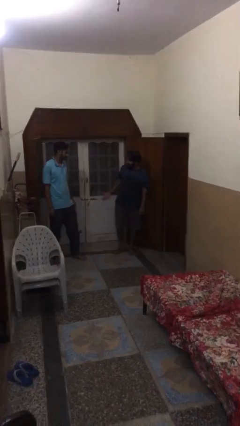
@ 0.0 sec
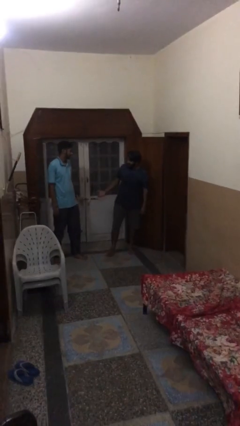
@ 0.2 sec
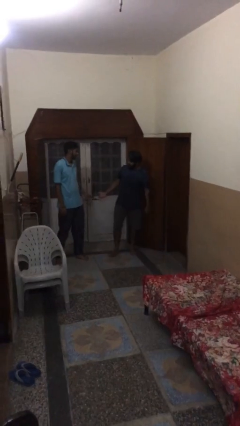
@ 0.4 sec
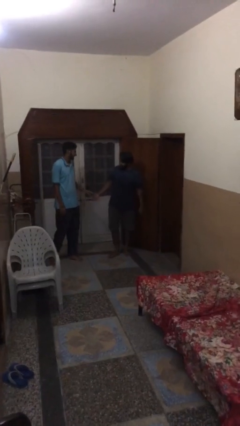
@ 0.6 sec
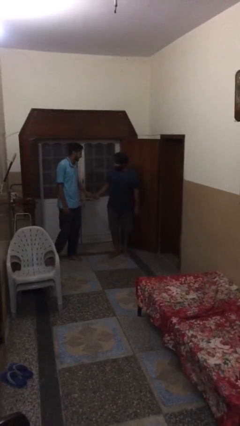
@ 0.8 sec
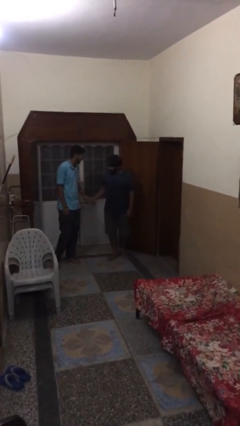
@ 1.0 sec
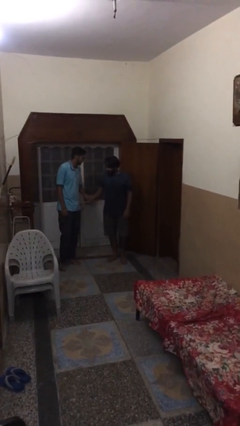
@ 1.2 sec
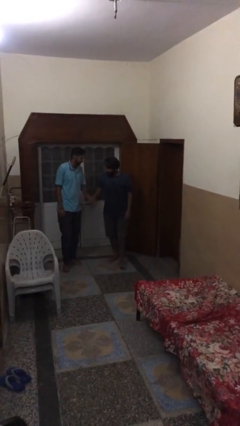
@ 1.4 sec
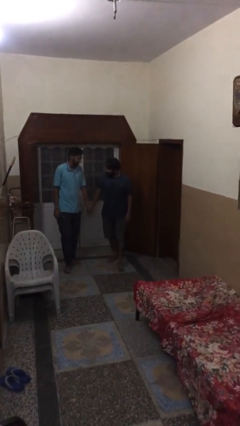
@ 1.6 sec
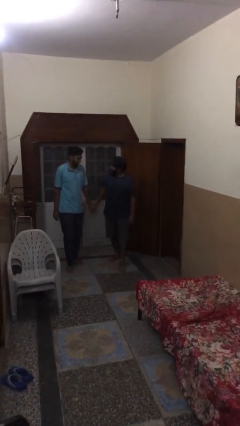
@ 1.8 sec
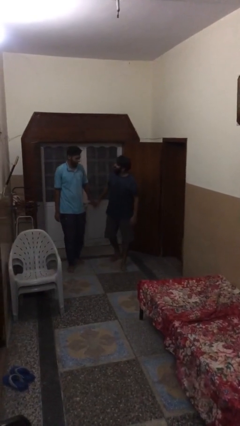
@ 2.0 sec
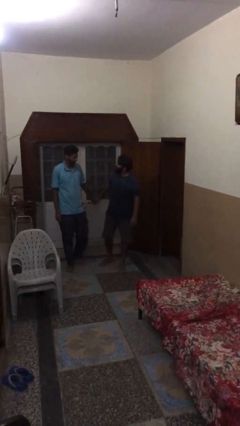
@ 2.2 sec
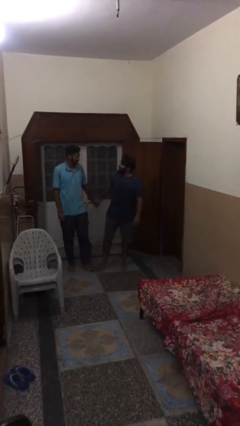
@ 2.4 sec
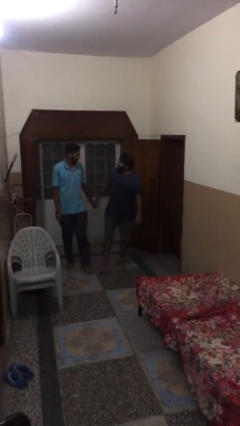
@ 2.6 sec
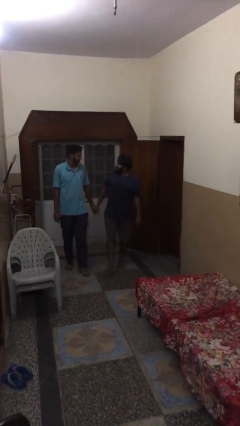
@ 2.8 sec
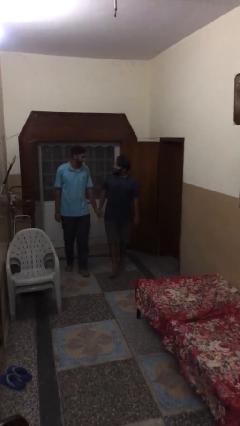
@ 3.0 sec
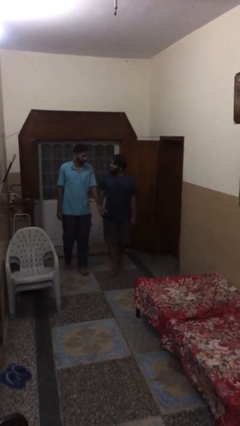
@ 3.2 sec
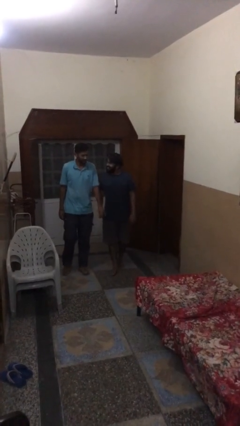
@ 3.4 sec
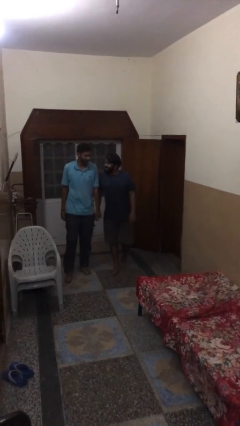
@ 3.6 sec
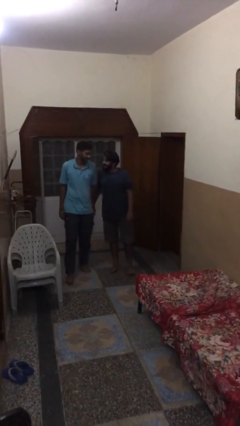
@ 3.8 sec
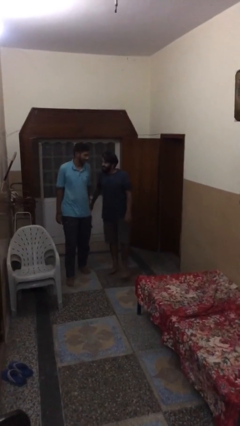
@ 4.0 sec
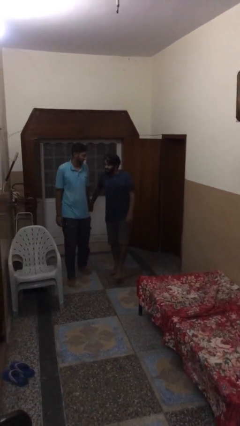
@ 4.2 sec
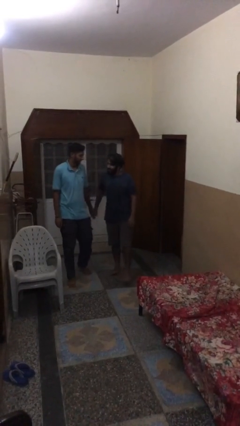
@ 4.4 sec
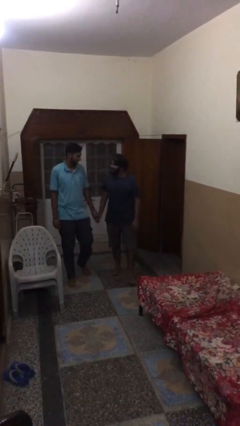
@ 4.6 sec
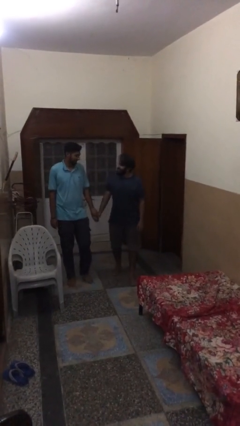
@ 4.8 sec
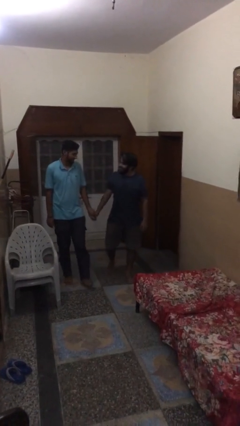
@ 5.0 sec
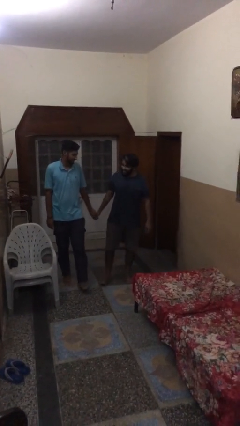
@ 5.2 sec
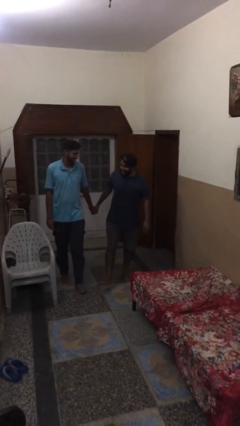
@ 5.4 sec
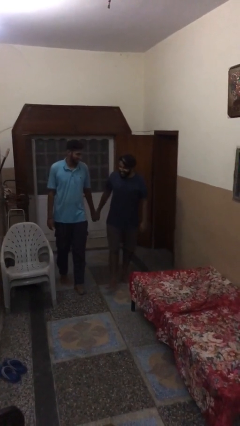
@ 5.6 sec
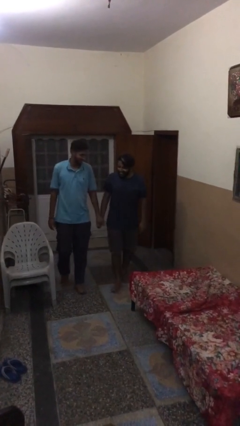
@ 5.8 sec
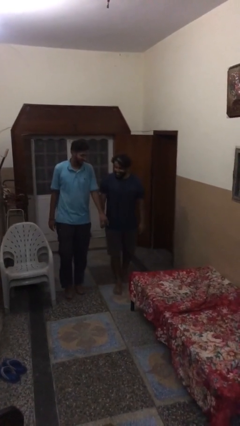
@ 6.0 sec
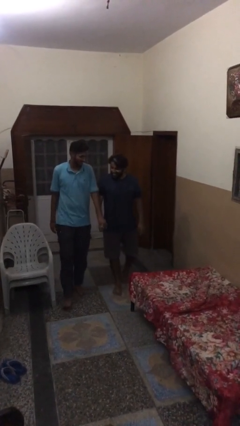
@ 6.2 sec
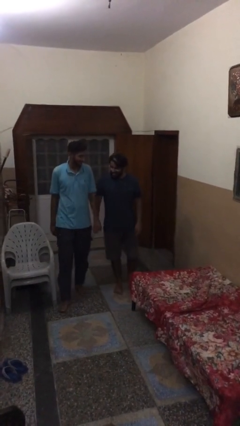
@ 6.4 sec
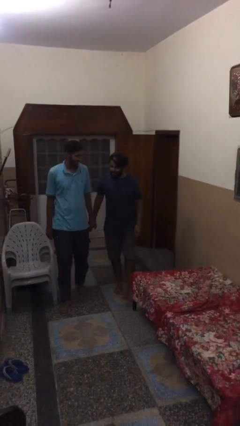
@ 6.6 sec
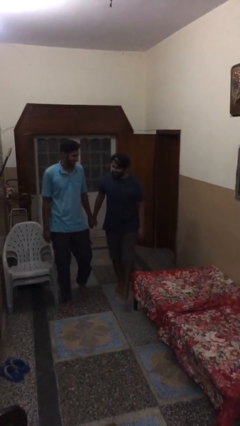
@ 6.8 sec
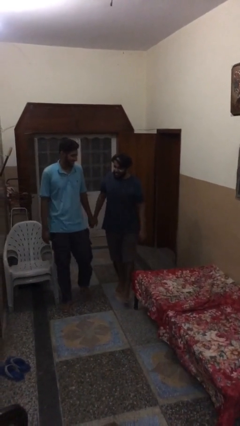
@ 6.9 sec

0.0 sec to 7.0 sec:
person holds hand

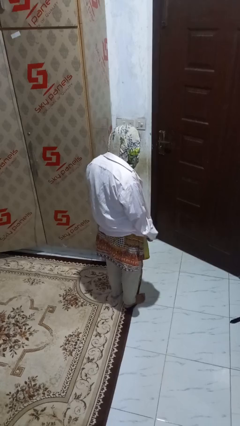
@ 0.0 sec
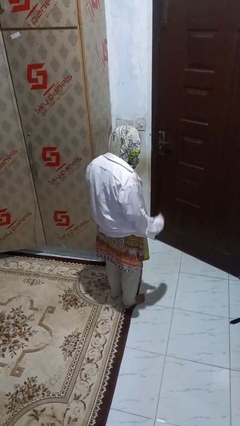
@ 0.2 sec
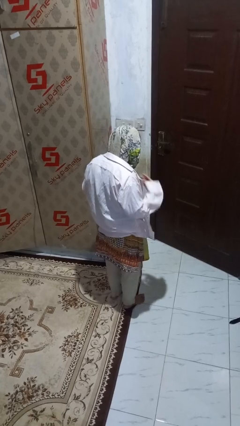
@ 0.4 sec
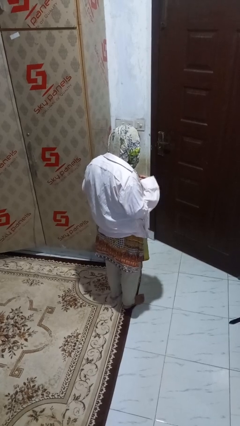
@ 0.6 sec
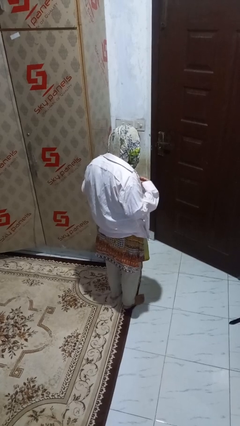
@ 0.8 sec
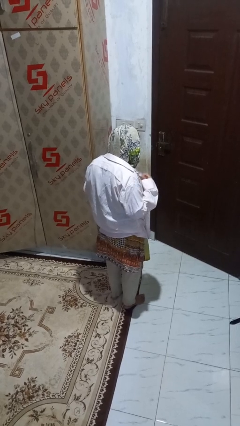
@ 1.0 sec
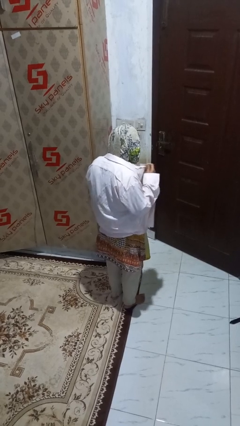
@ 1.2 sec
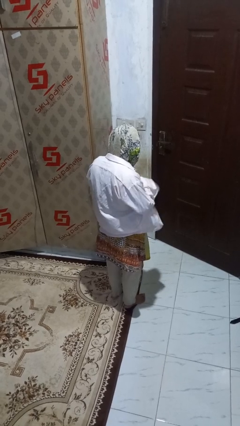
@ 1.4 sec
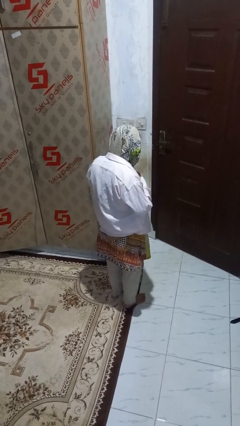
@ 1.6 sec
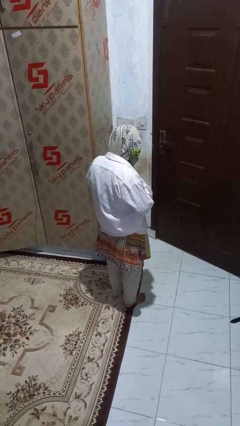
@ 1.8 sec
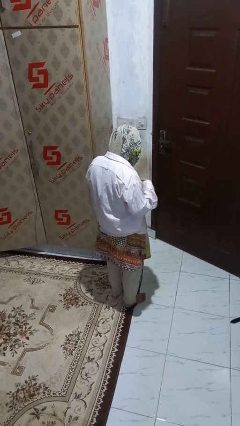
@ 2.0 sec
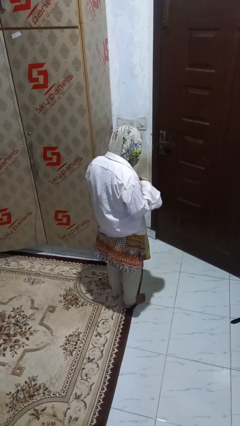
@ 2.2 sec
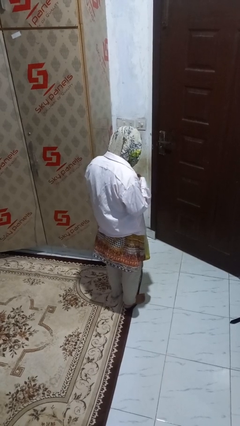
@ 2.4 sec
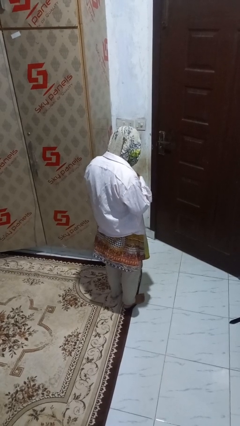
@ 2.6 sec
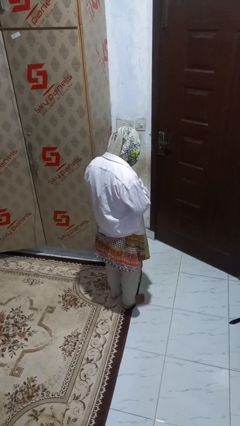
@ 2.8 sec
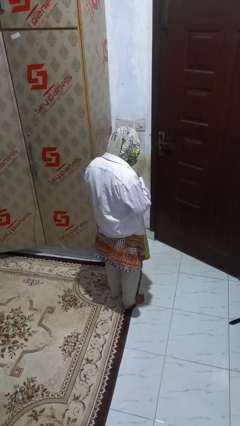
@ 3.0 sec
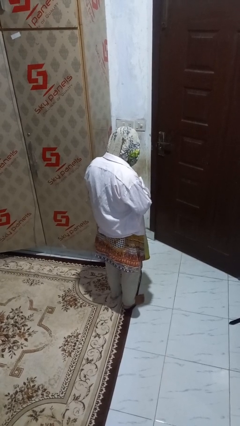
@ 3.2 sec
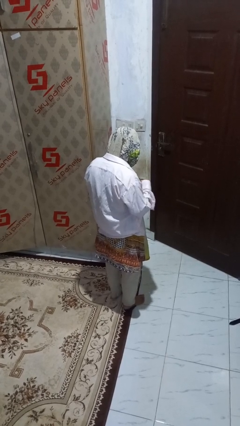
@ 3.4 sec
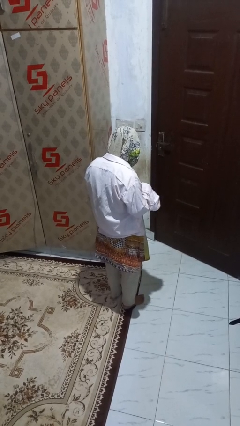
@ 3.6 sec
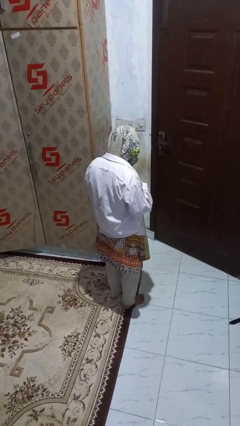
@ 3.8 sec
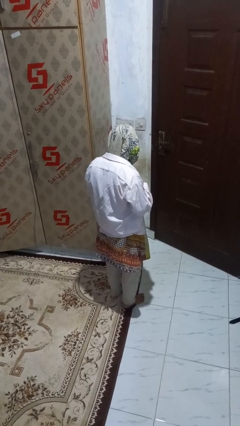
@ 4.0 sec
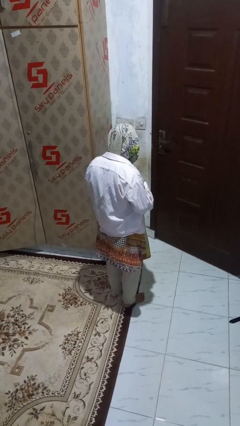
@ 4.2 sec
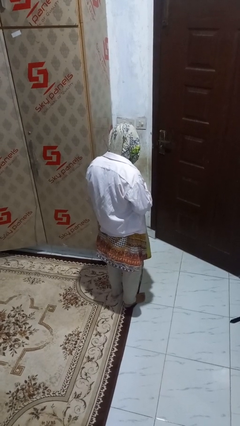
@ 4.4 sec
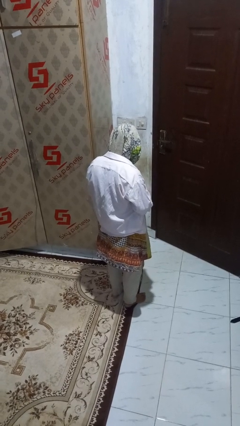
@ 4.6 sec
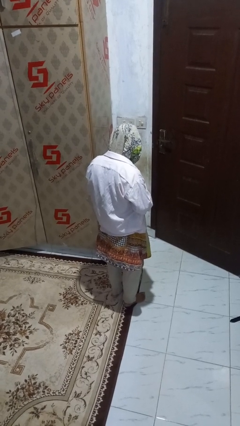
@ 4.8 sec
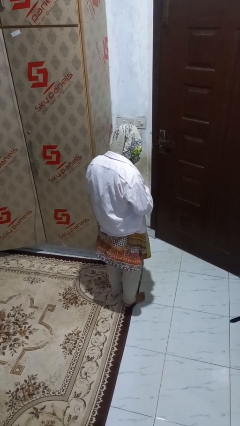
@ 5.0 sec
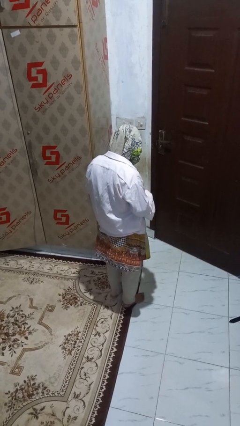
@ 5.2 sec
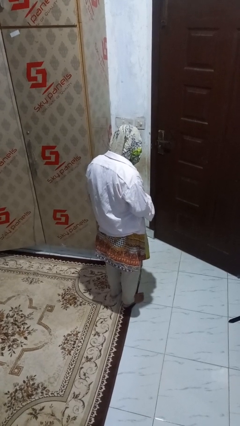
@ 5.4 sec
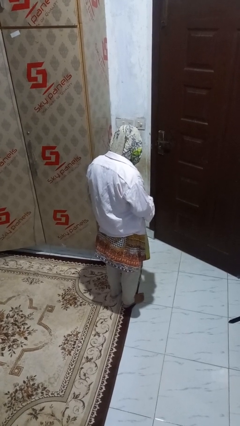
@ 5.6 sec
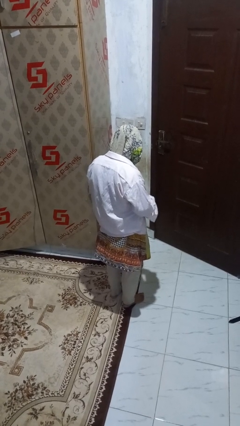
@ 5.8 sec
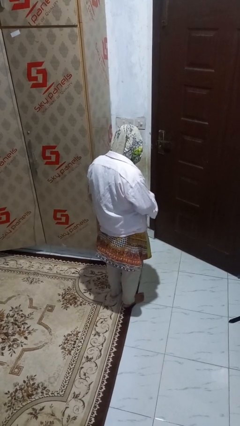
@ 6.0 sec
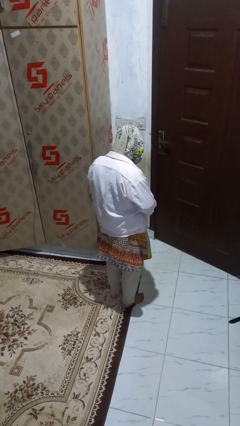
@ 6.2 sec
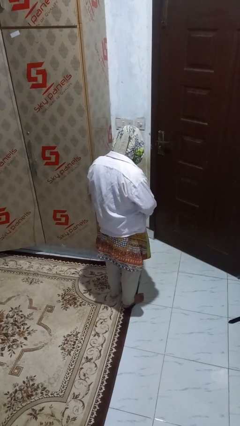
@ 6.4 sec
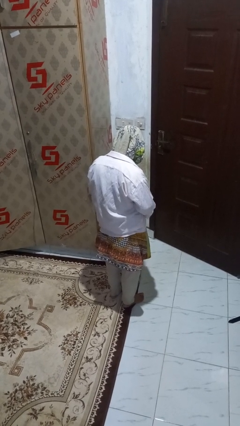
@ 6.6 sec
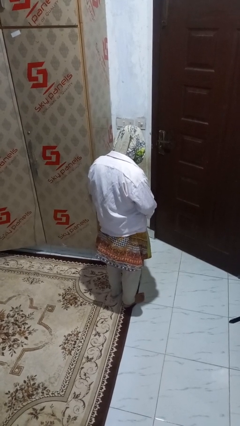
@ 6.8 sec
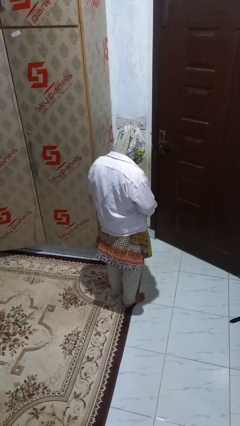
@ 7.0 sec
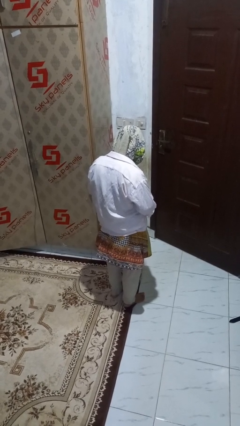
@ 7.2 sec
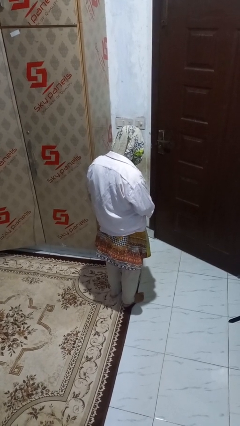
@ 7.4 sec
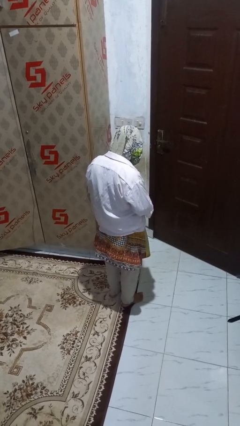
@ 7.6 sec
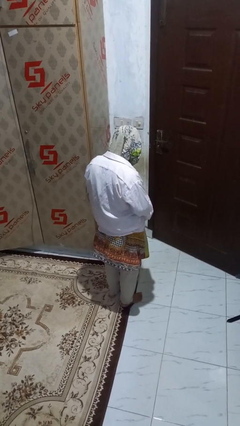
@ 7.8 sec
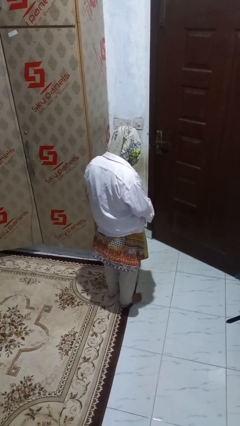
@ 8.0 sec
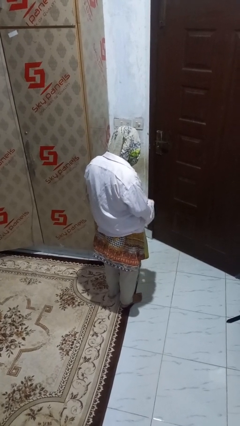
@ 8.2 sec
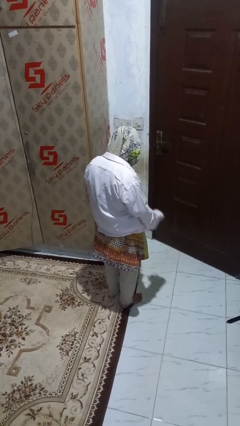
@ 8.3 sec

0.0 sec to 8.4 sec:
person buttons shirt

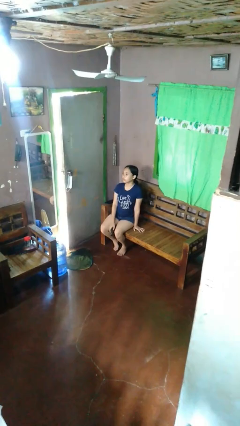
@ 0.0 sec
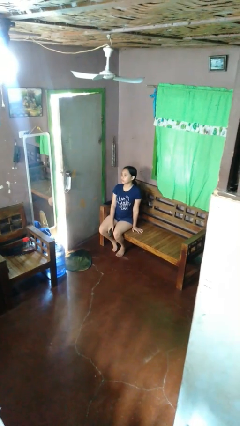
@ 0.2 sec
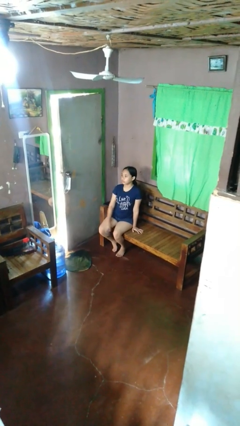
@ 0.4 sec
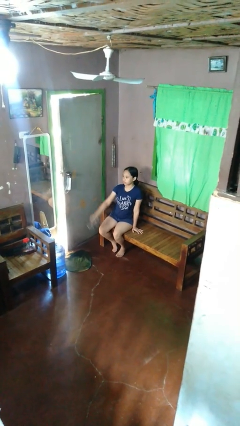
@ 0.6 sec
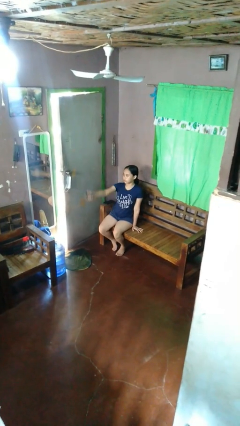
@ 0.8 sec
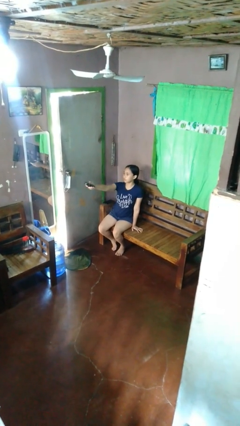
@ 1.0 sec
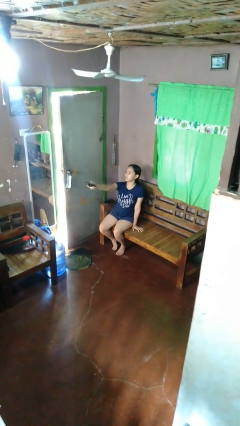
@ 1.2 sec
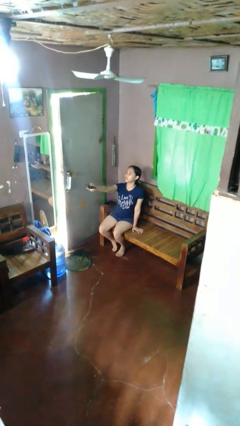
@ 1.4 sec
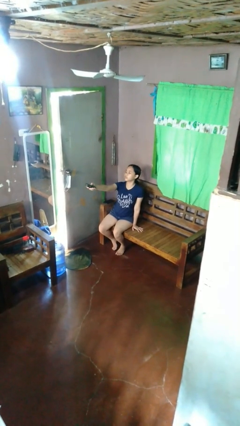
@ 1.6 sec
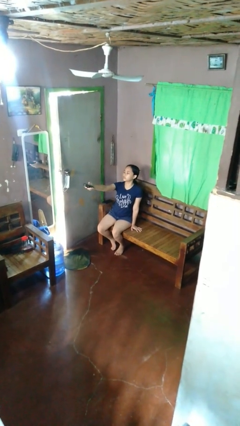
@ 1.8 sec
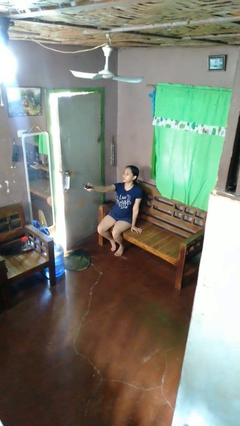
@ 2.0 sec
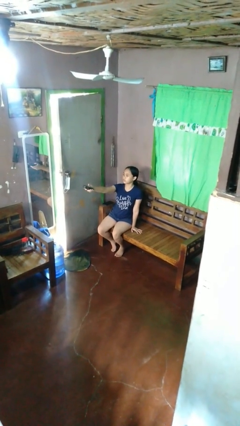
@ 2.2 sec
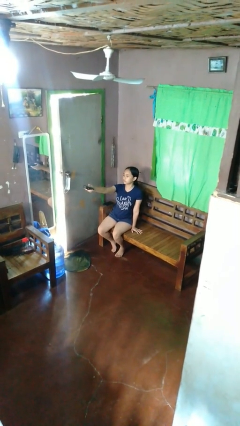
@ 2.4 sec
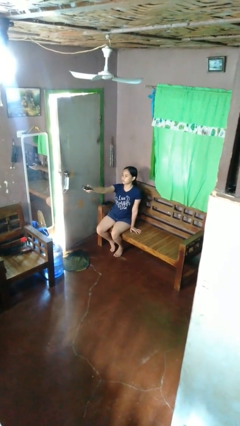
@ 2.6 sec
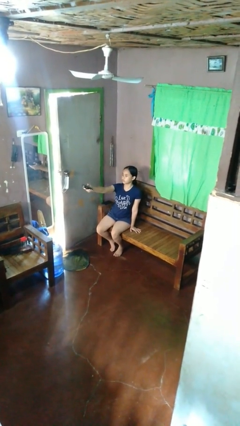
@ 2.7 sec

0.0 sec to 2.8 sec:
person uses television remote
